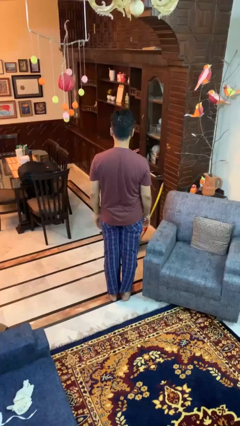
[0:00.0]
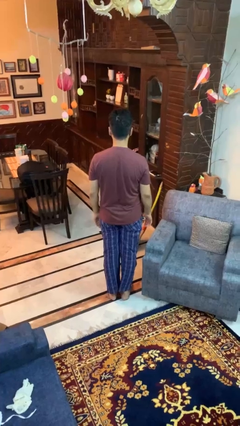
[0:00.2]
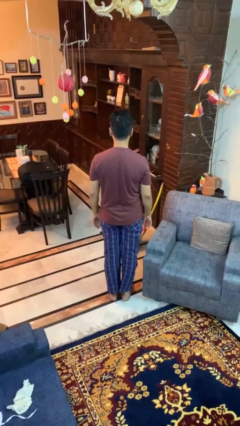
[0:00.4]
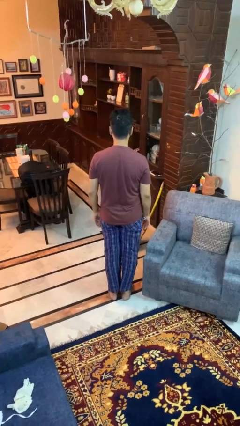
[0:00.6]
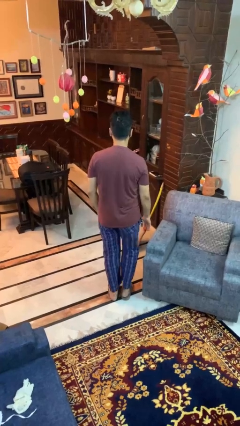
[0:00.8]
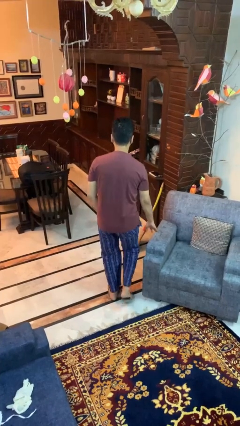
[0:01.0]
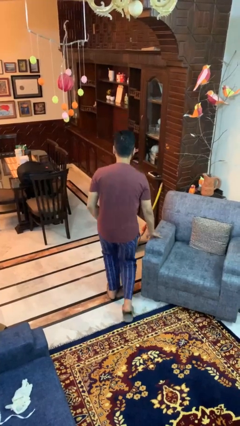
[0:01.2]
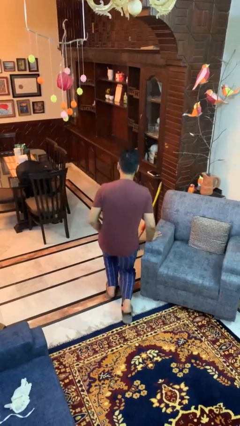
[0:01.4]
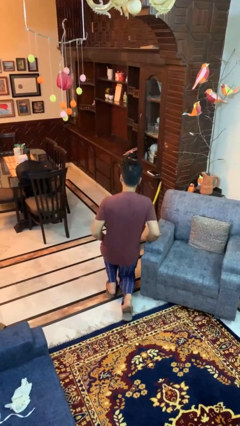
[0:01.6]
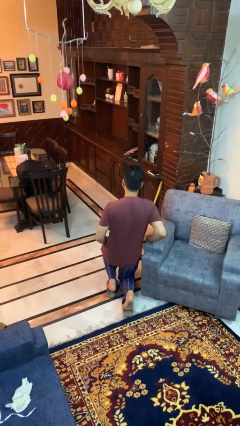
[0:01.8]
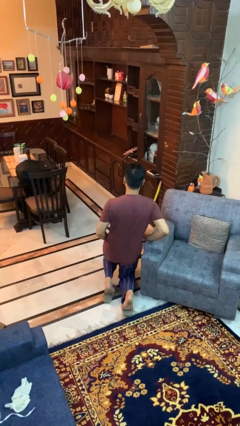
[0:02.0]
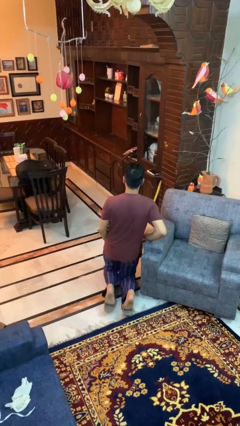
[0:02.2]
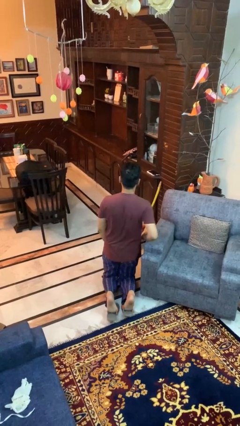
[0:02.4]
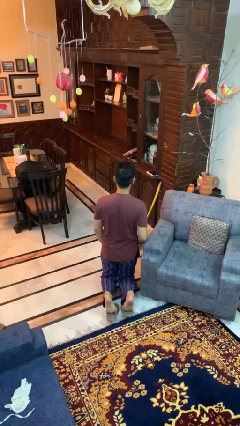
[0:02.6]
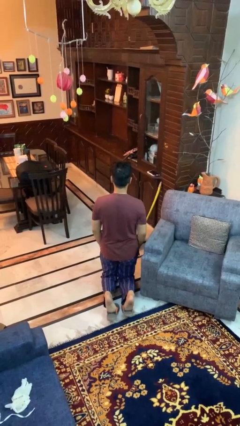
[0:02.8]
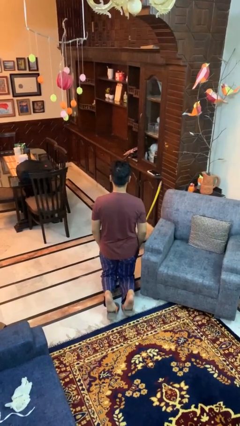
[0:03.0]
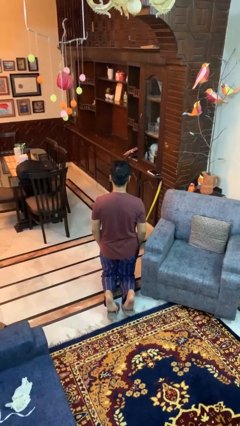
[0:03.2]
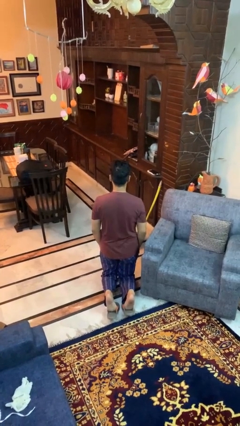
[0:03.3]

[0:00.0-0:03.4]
person kneels

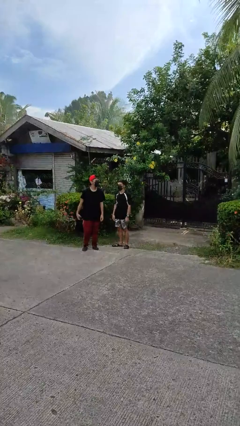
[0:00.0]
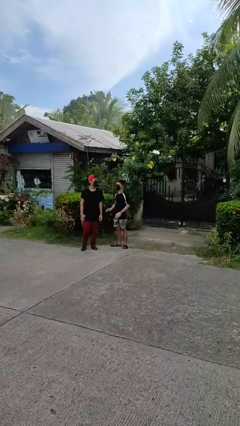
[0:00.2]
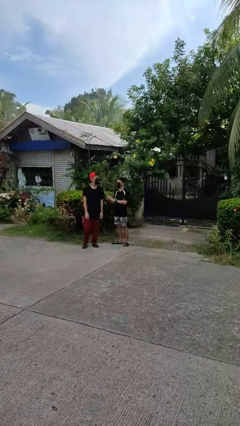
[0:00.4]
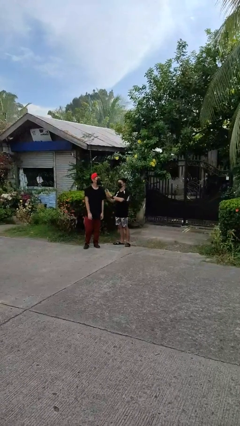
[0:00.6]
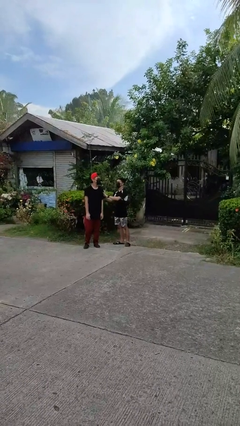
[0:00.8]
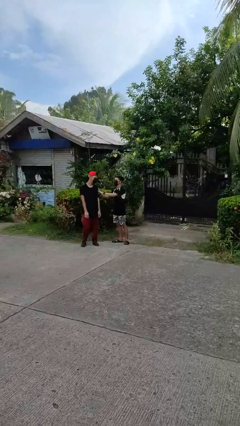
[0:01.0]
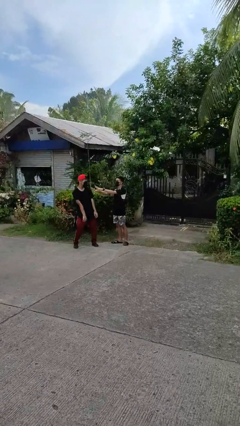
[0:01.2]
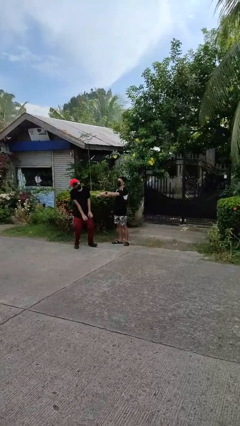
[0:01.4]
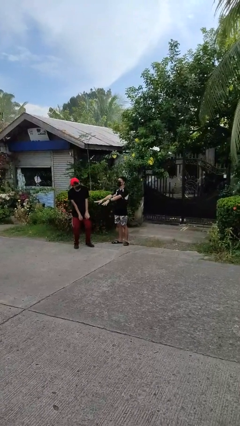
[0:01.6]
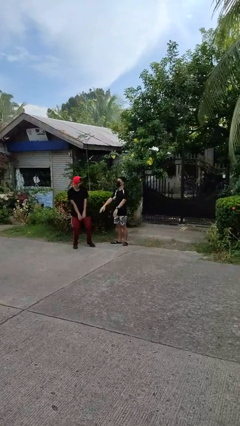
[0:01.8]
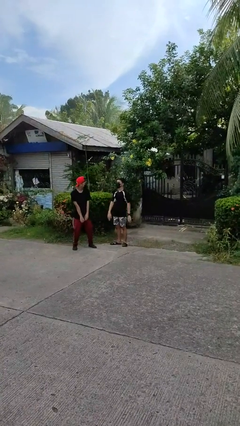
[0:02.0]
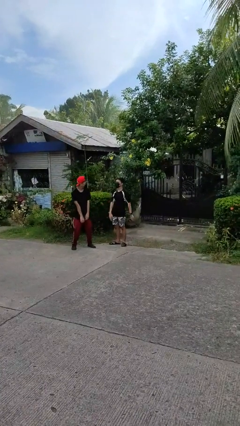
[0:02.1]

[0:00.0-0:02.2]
person shoves person

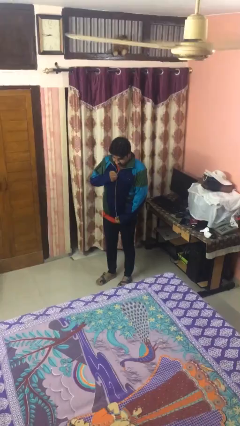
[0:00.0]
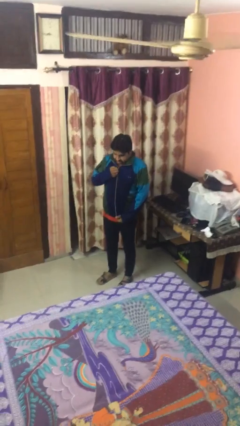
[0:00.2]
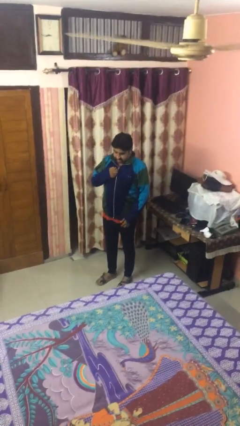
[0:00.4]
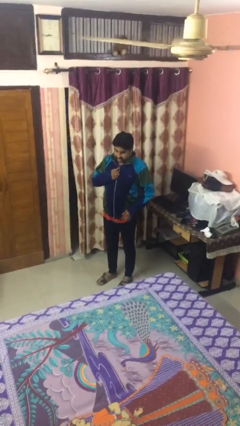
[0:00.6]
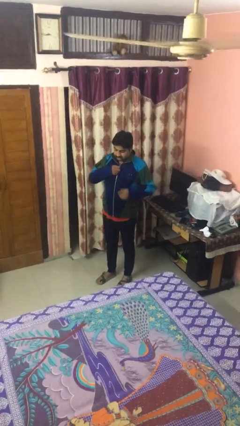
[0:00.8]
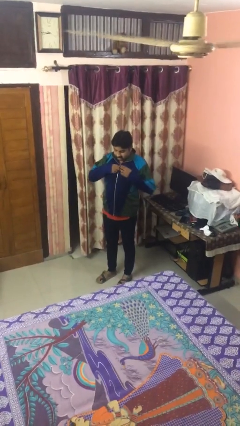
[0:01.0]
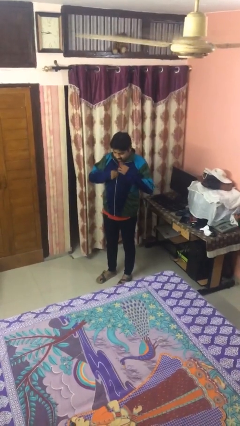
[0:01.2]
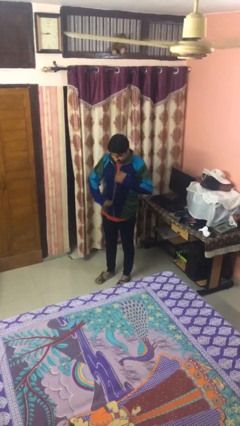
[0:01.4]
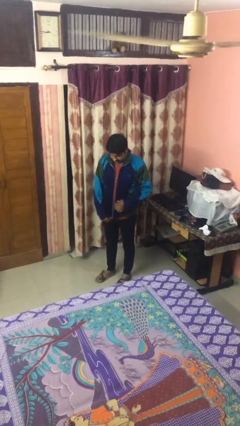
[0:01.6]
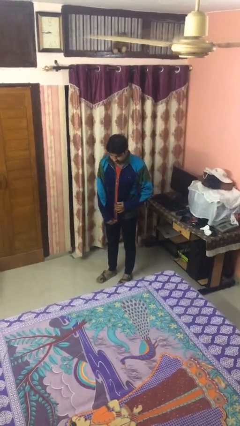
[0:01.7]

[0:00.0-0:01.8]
person unzips jacket

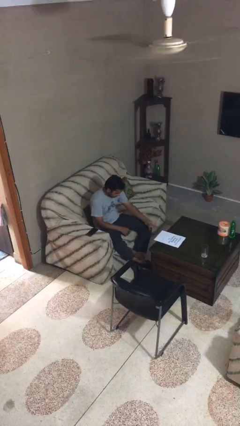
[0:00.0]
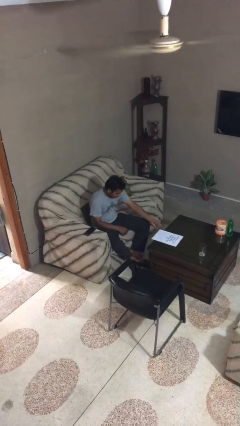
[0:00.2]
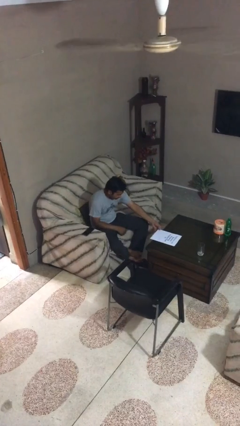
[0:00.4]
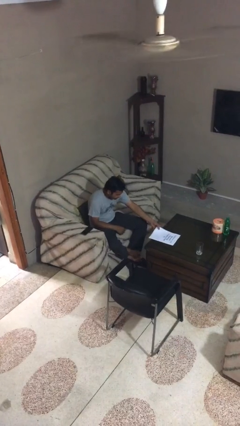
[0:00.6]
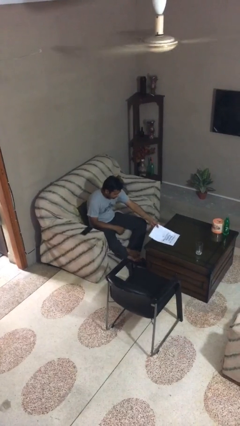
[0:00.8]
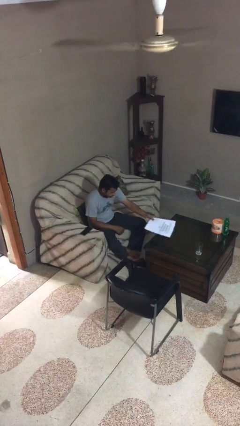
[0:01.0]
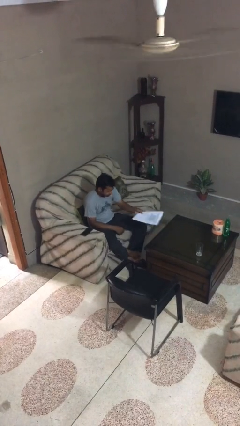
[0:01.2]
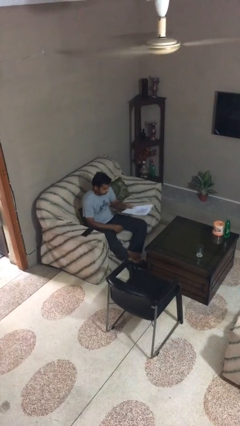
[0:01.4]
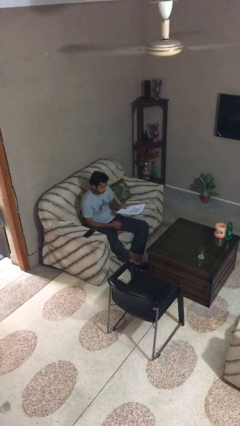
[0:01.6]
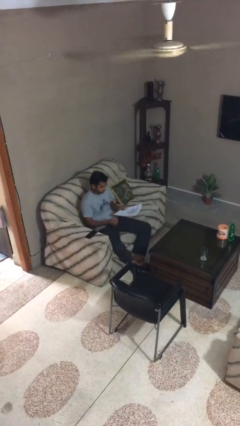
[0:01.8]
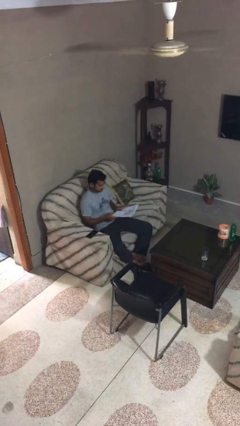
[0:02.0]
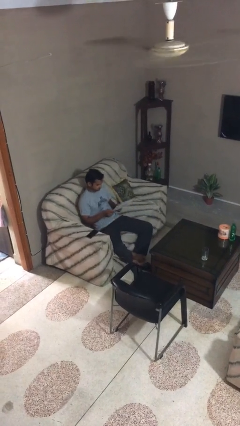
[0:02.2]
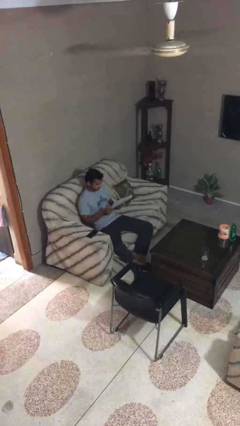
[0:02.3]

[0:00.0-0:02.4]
person picks up object from table

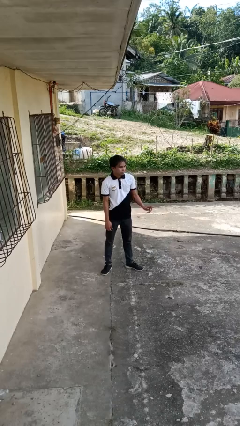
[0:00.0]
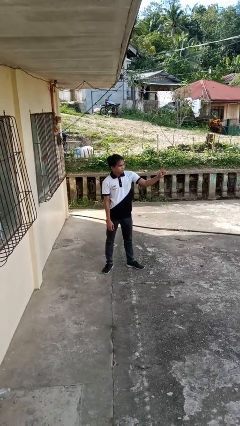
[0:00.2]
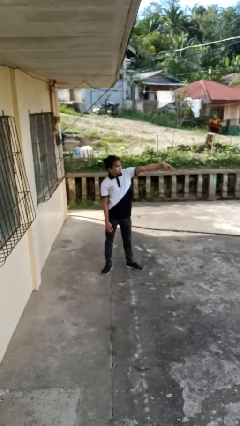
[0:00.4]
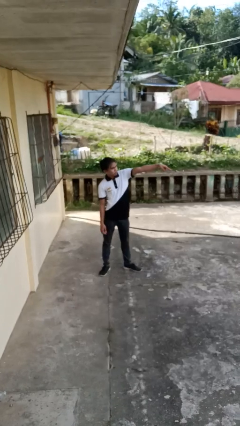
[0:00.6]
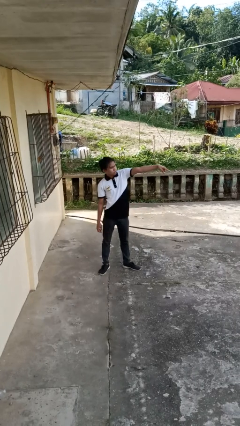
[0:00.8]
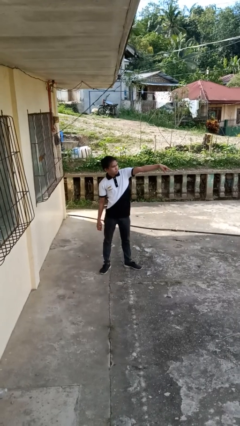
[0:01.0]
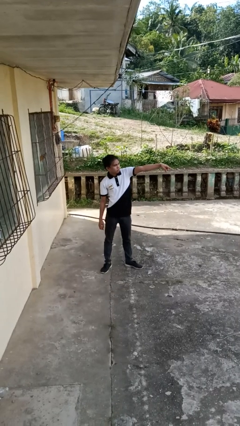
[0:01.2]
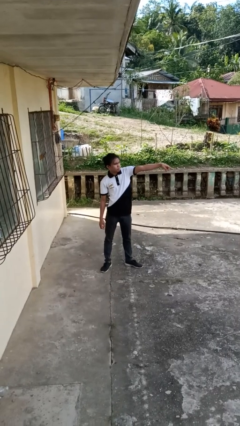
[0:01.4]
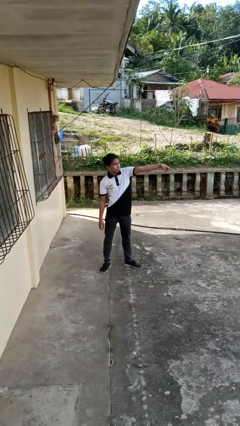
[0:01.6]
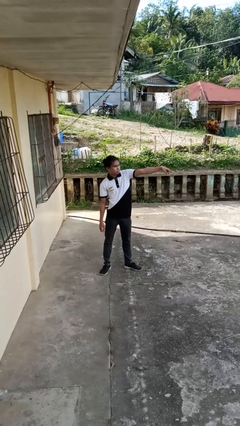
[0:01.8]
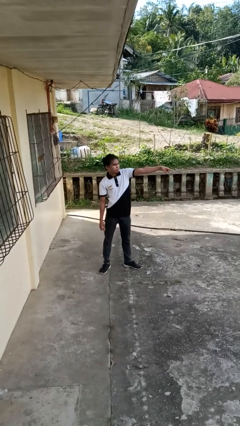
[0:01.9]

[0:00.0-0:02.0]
person points at person

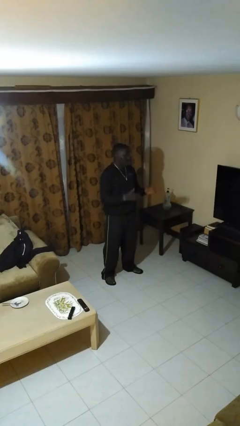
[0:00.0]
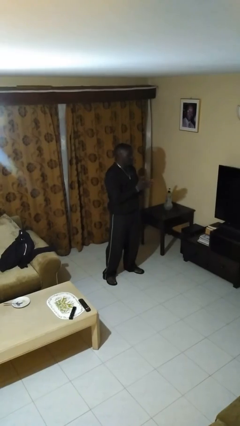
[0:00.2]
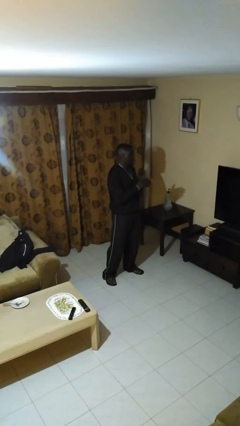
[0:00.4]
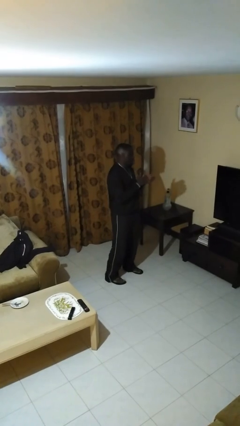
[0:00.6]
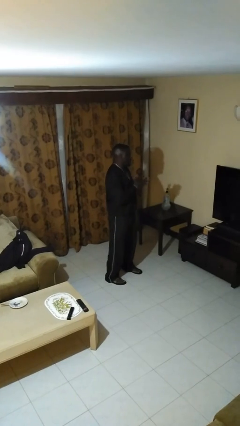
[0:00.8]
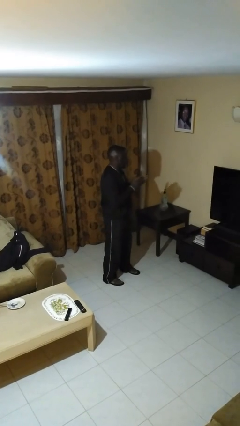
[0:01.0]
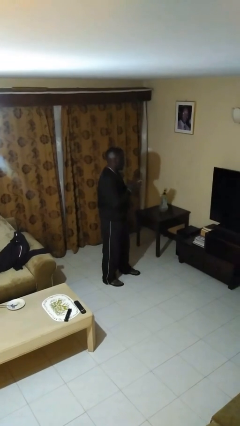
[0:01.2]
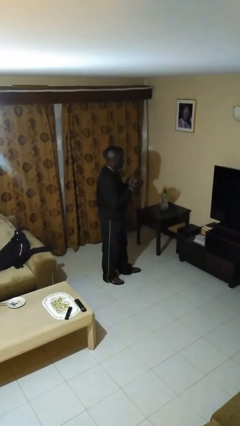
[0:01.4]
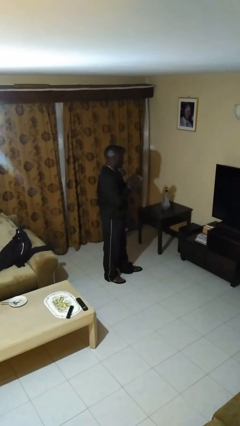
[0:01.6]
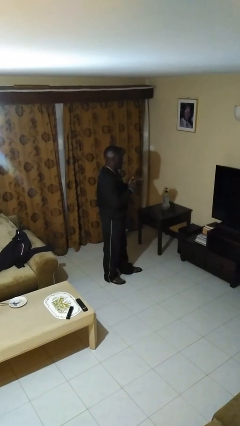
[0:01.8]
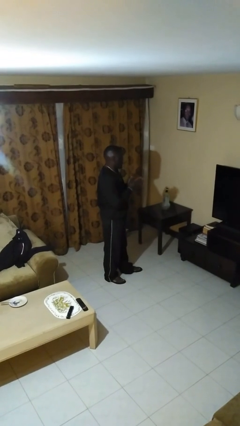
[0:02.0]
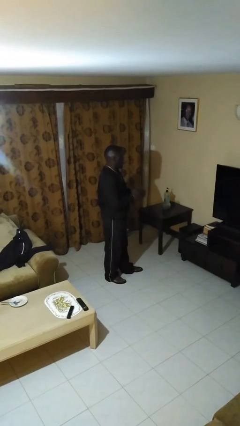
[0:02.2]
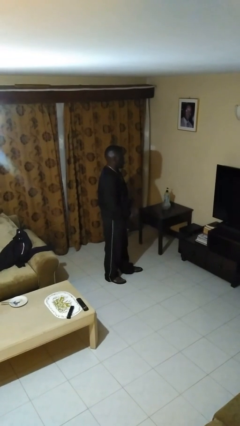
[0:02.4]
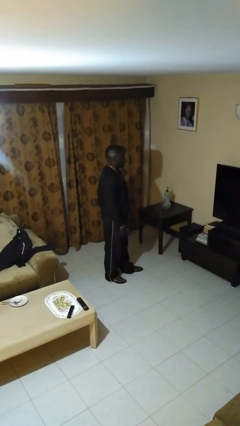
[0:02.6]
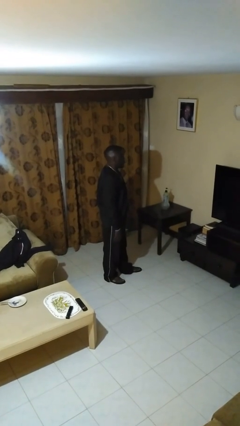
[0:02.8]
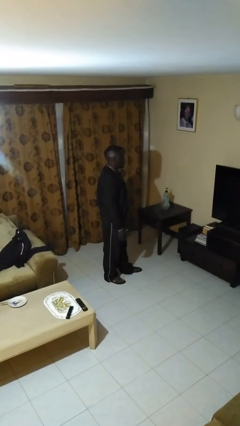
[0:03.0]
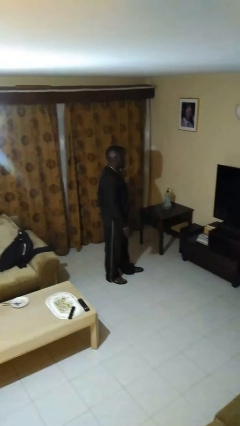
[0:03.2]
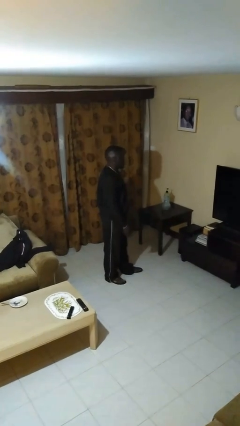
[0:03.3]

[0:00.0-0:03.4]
person claps hands

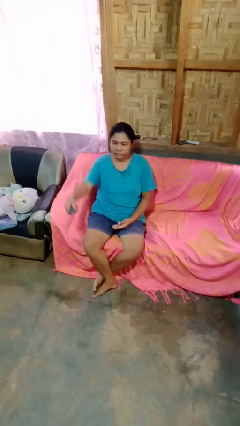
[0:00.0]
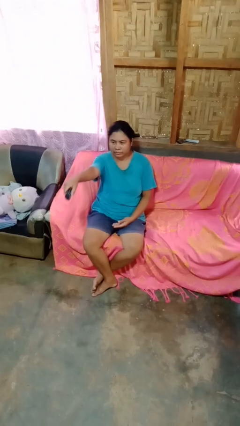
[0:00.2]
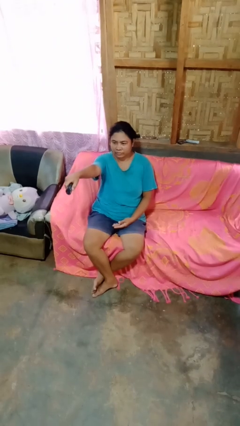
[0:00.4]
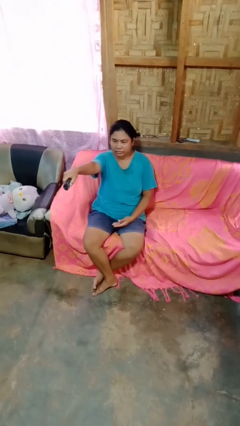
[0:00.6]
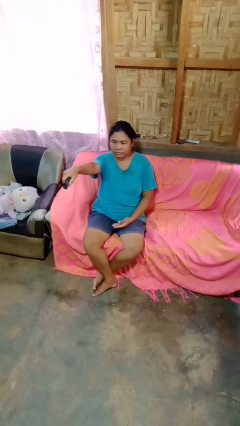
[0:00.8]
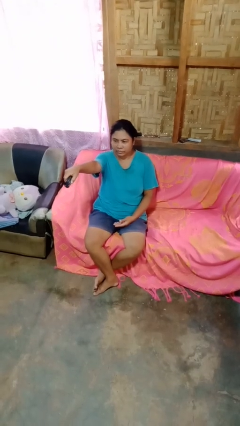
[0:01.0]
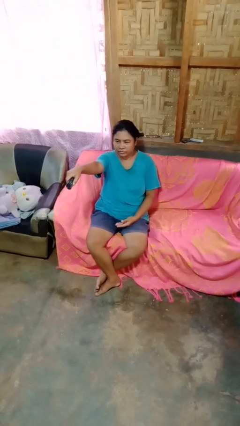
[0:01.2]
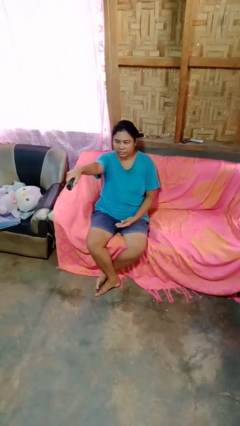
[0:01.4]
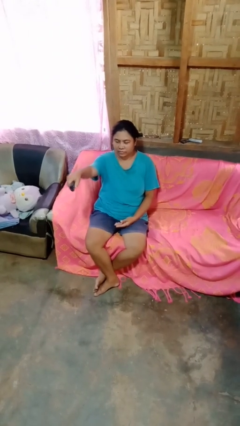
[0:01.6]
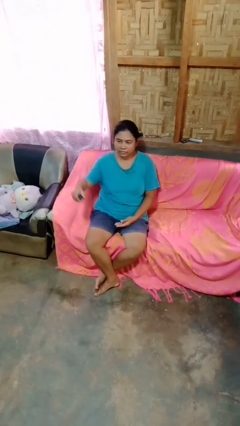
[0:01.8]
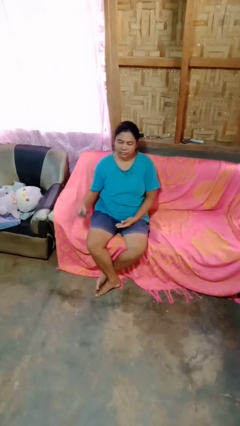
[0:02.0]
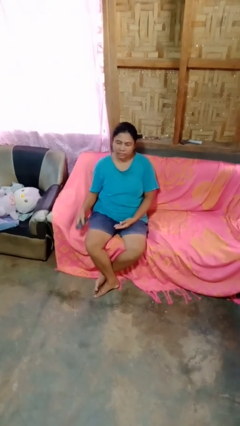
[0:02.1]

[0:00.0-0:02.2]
person uses television remote
